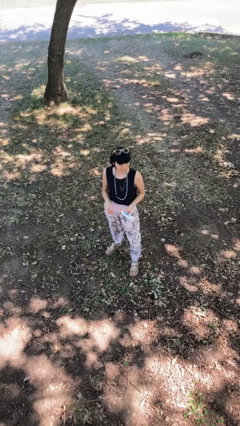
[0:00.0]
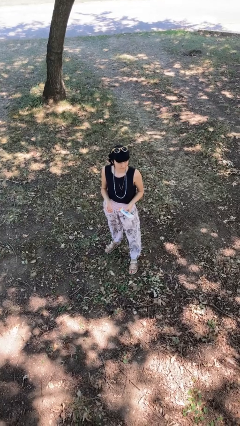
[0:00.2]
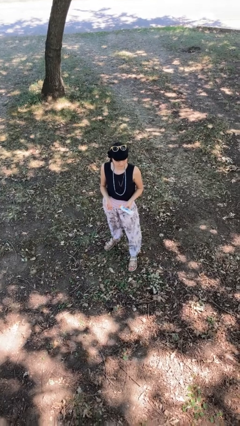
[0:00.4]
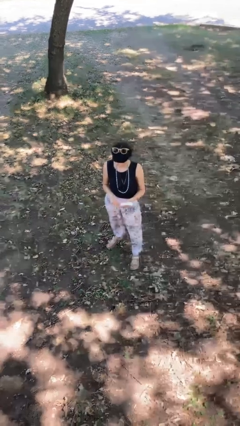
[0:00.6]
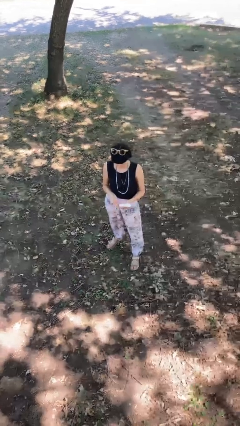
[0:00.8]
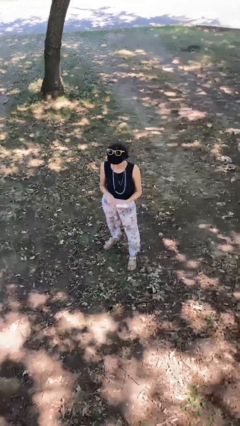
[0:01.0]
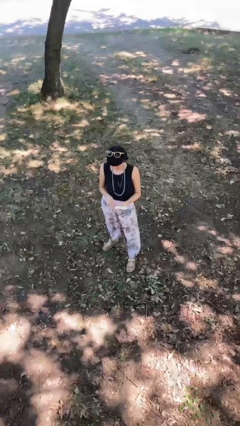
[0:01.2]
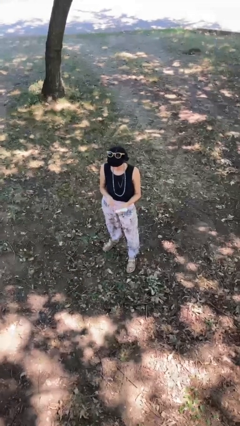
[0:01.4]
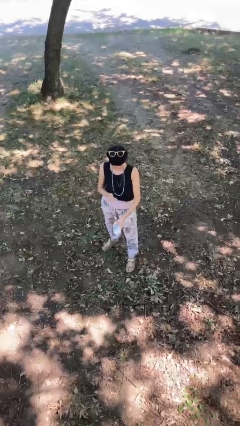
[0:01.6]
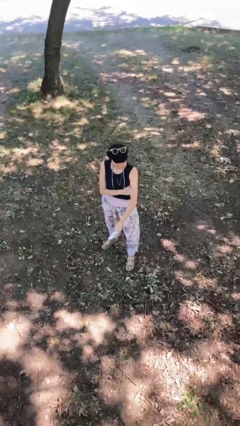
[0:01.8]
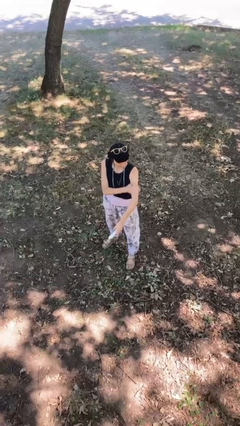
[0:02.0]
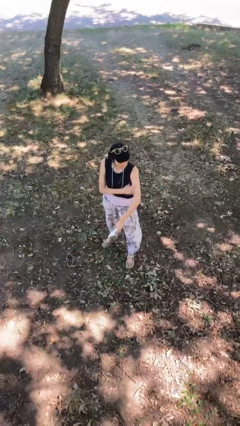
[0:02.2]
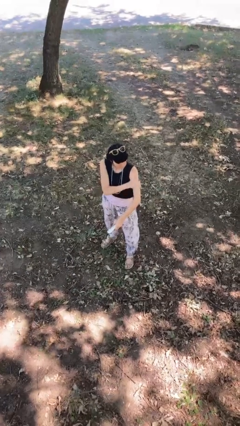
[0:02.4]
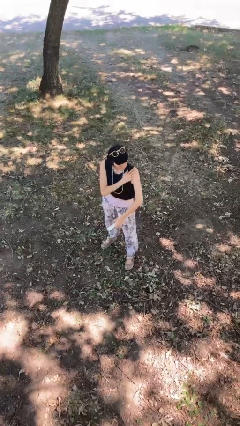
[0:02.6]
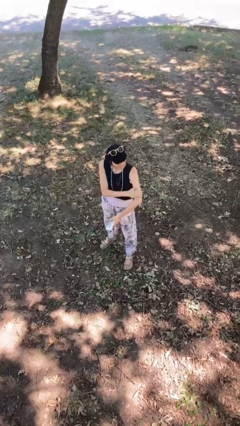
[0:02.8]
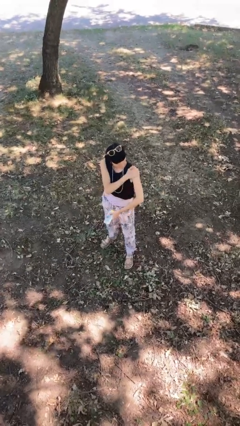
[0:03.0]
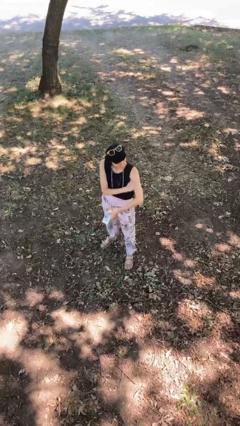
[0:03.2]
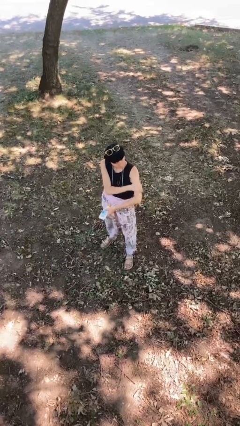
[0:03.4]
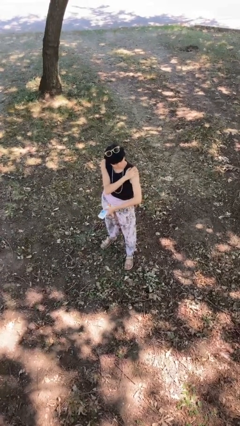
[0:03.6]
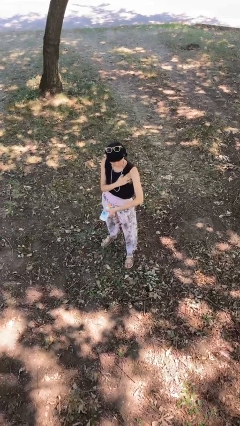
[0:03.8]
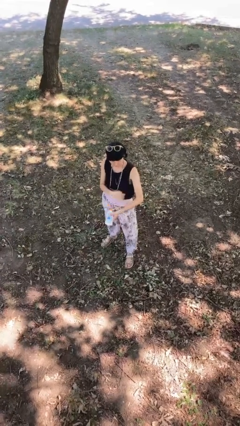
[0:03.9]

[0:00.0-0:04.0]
person applies sunscreen

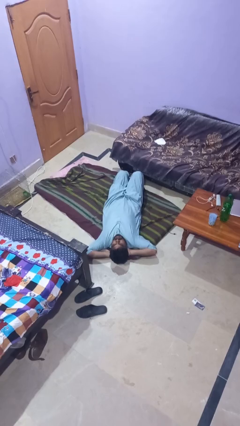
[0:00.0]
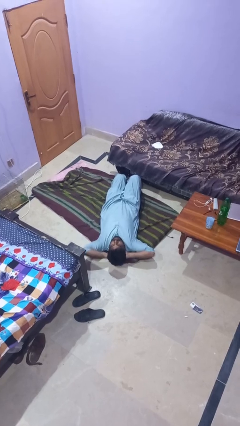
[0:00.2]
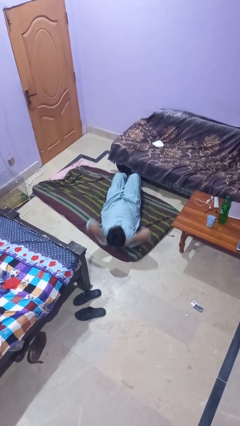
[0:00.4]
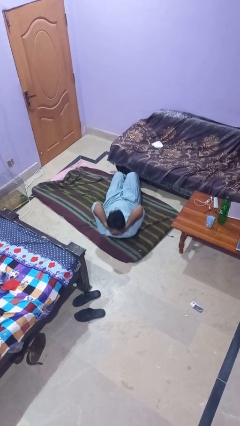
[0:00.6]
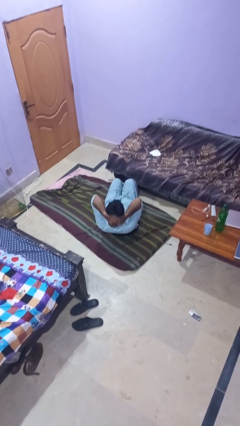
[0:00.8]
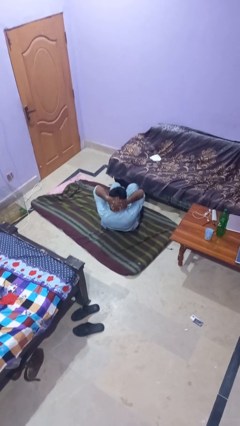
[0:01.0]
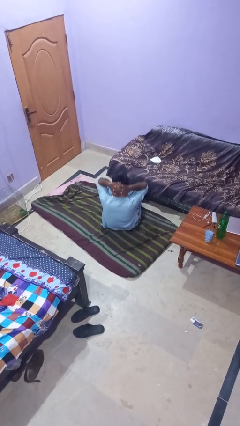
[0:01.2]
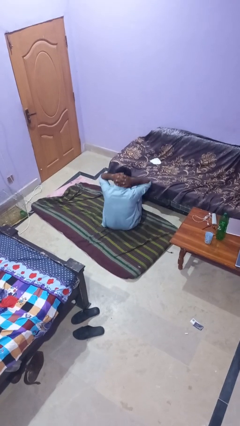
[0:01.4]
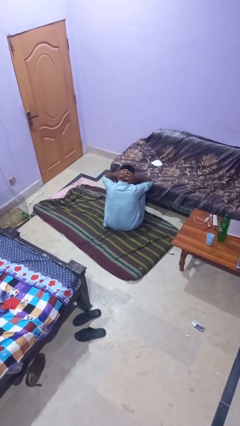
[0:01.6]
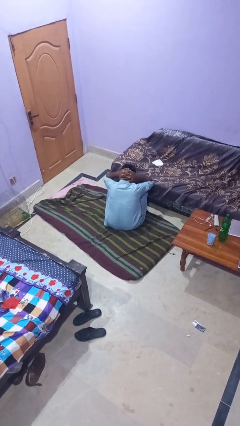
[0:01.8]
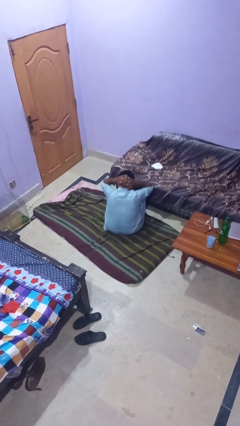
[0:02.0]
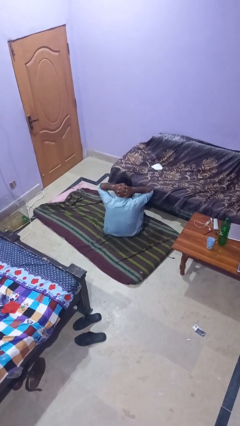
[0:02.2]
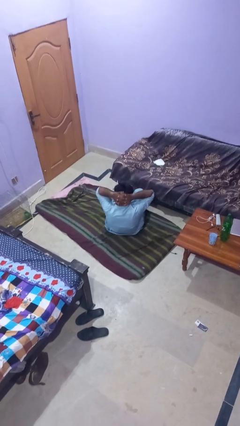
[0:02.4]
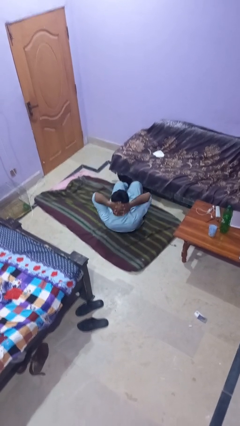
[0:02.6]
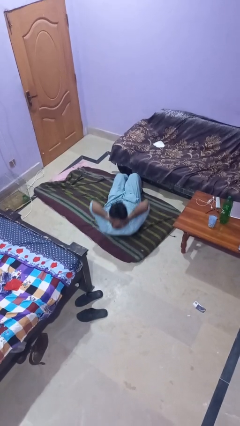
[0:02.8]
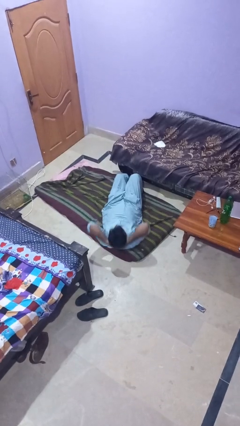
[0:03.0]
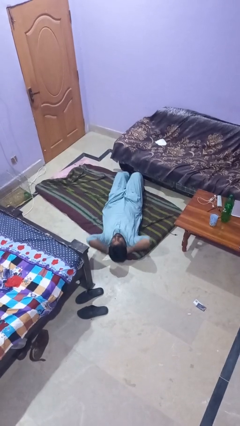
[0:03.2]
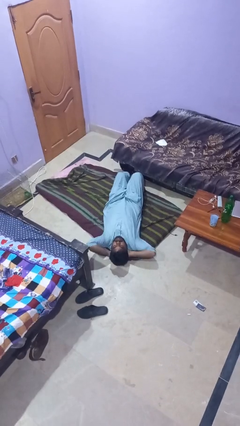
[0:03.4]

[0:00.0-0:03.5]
person exercises with situp

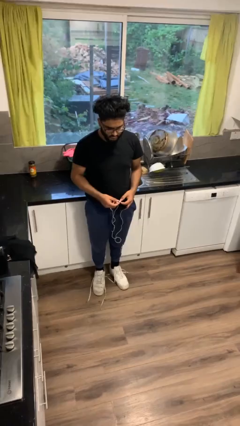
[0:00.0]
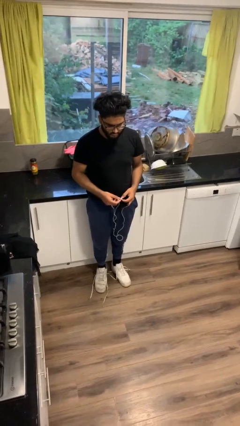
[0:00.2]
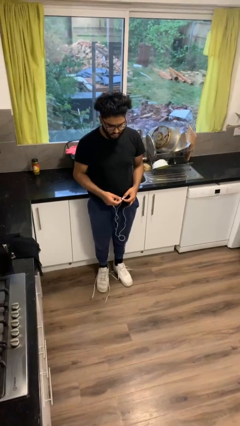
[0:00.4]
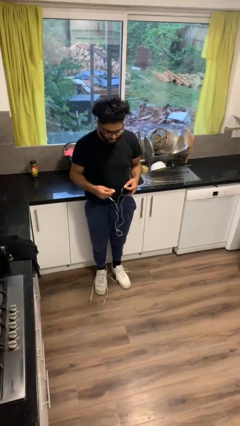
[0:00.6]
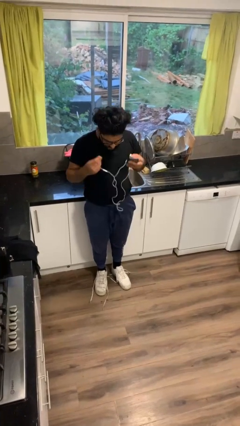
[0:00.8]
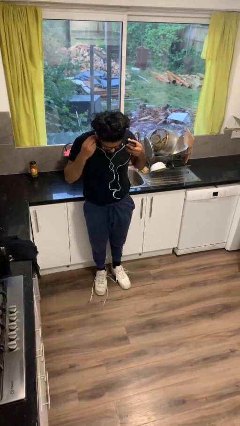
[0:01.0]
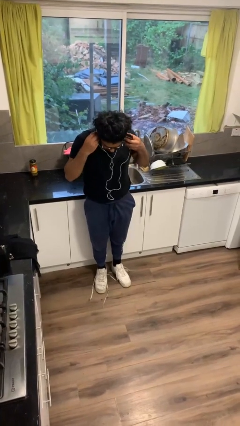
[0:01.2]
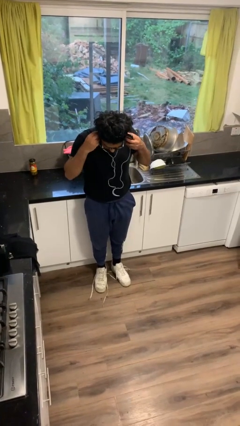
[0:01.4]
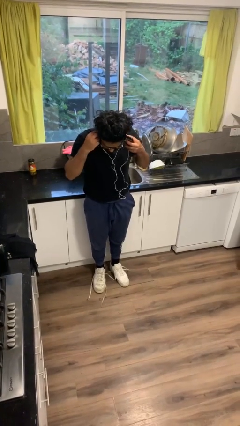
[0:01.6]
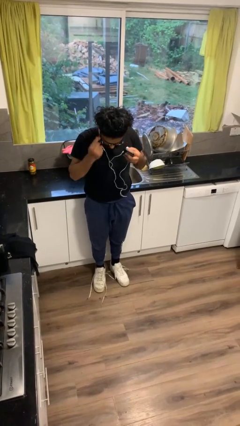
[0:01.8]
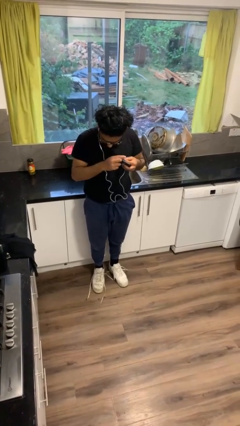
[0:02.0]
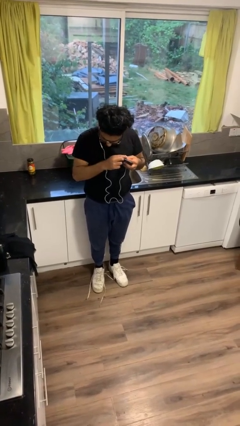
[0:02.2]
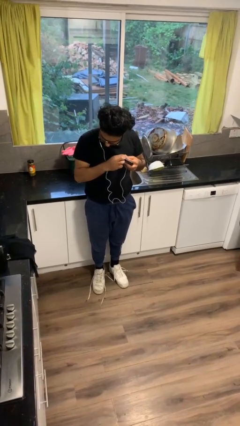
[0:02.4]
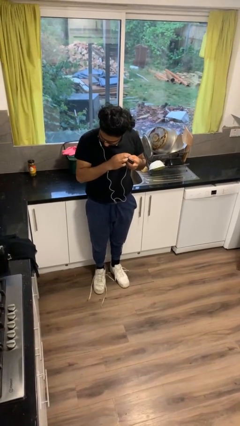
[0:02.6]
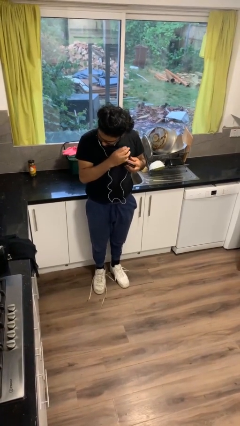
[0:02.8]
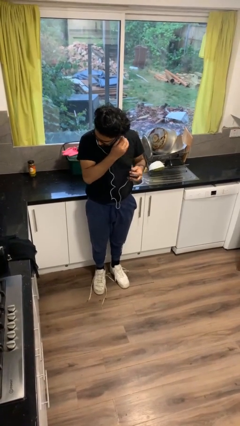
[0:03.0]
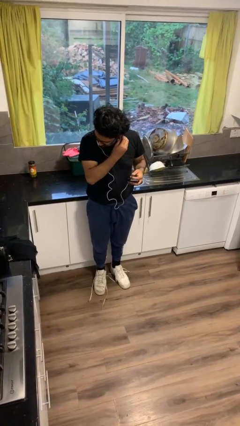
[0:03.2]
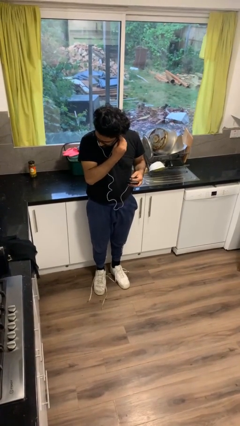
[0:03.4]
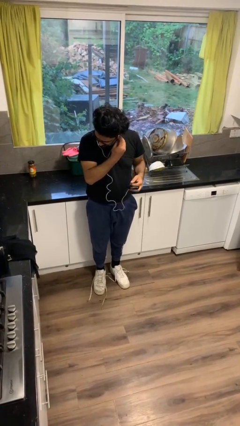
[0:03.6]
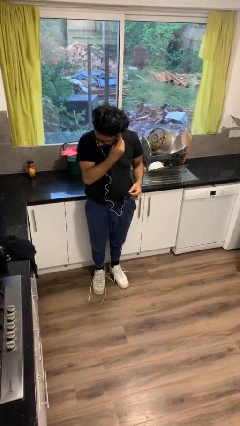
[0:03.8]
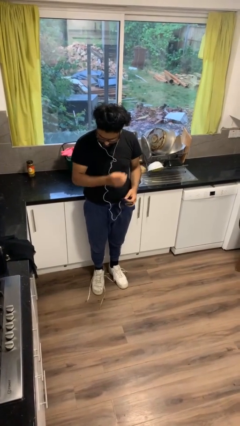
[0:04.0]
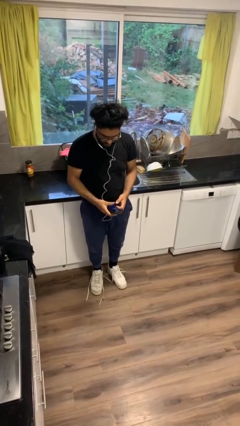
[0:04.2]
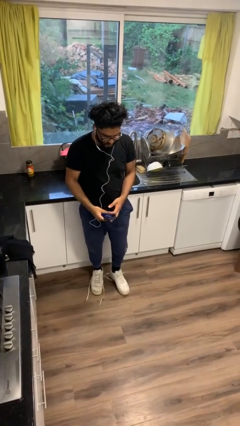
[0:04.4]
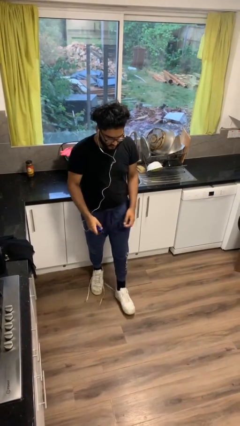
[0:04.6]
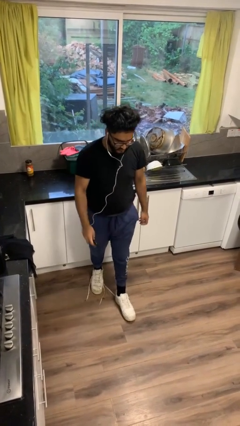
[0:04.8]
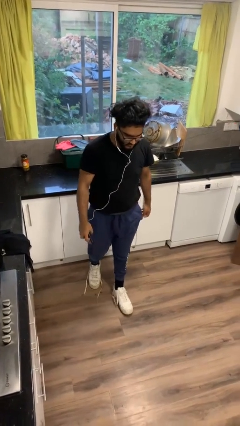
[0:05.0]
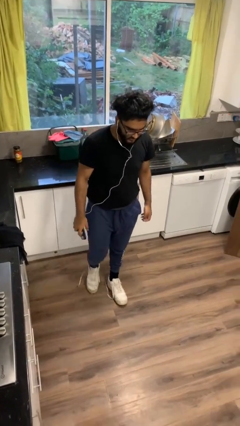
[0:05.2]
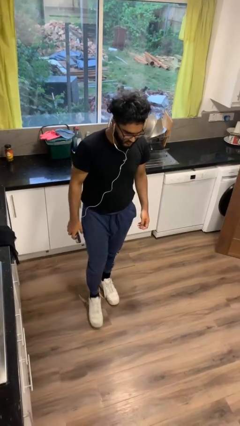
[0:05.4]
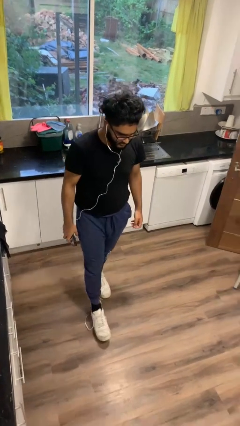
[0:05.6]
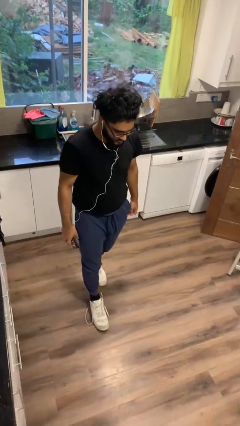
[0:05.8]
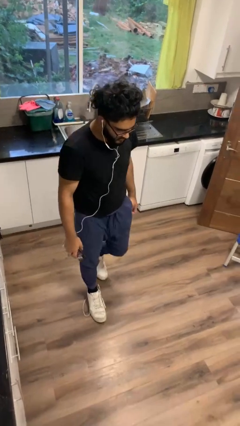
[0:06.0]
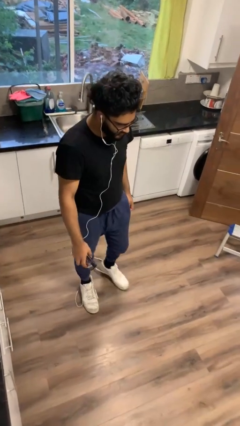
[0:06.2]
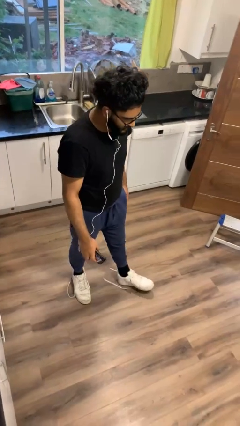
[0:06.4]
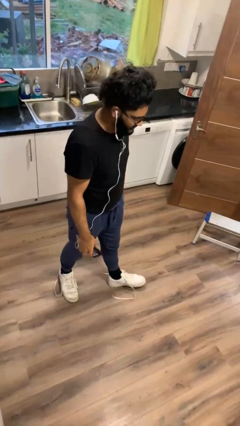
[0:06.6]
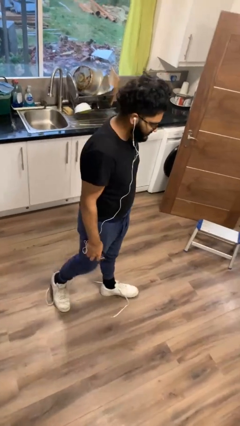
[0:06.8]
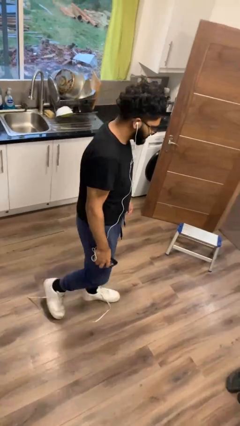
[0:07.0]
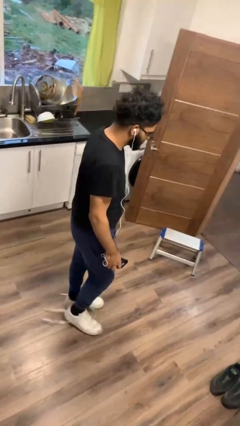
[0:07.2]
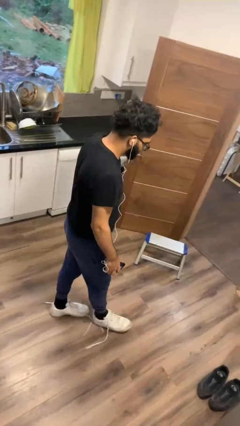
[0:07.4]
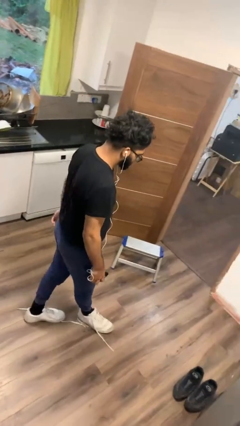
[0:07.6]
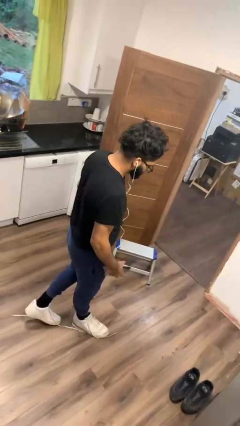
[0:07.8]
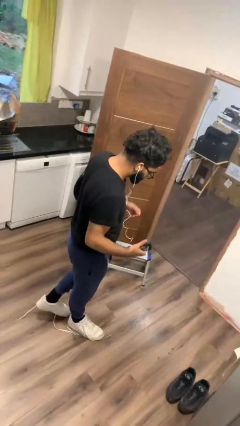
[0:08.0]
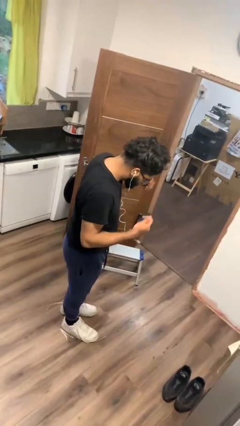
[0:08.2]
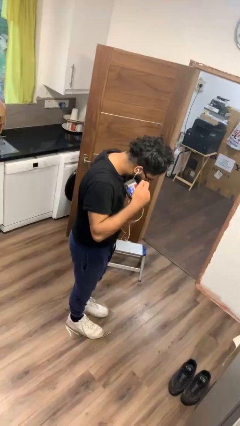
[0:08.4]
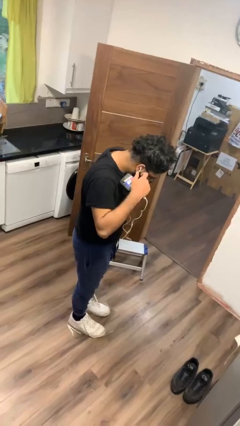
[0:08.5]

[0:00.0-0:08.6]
person puts on headphones

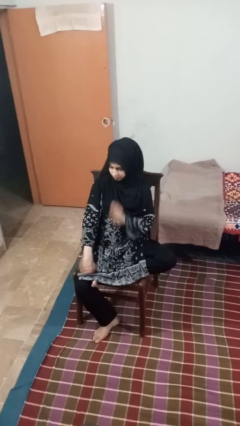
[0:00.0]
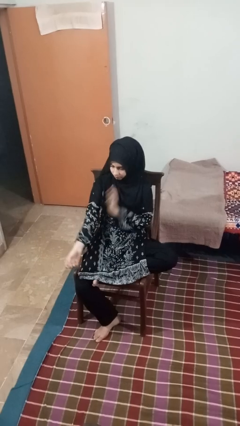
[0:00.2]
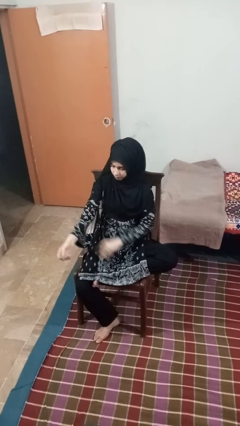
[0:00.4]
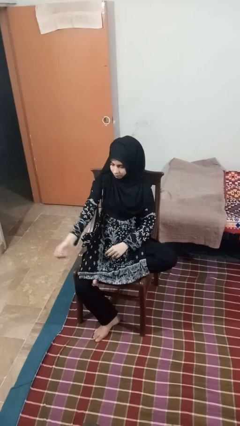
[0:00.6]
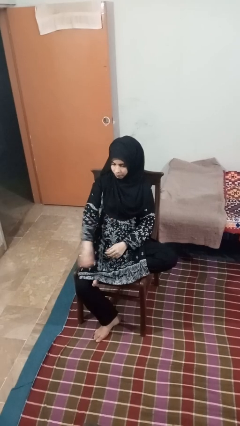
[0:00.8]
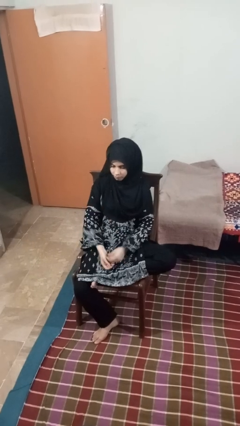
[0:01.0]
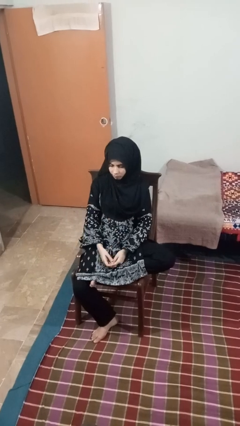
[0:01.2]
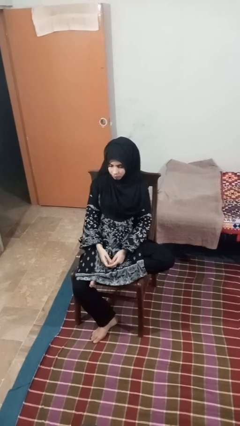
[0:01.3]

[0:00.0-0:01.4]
person swats bug

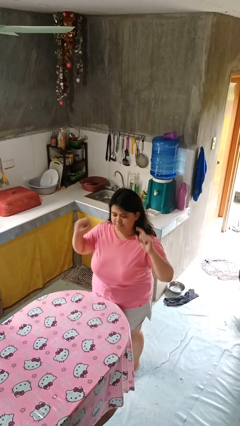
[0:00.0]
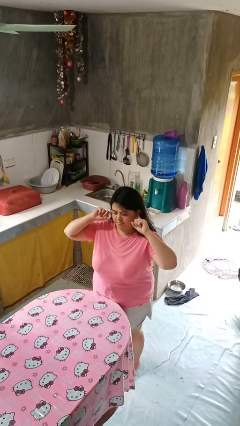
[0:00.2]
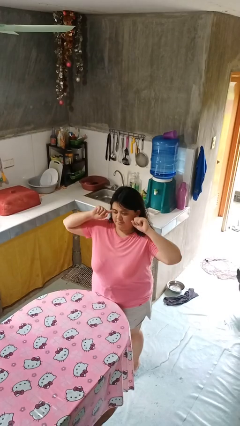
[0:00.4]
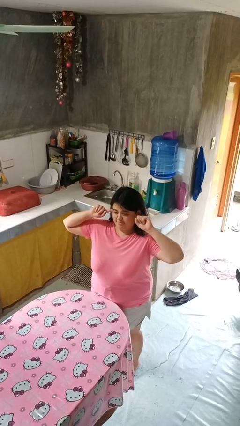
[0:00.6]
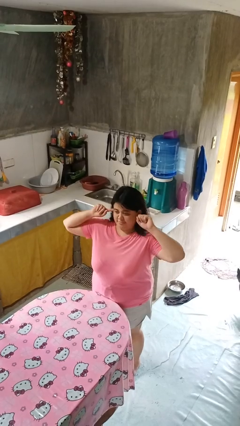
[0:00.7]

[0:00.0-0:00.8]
person puts fingers in ear
